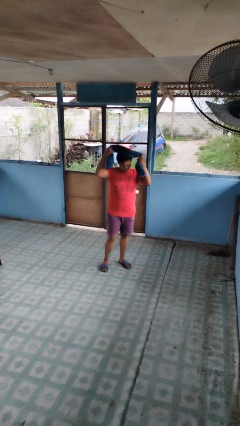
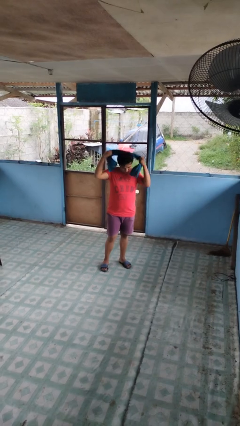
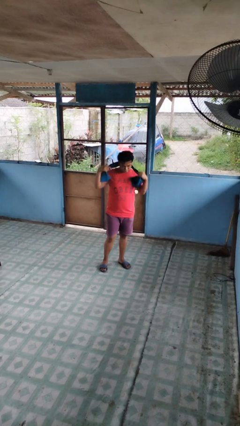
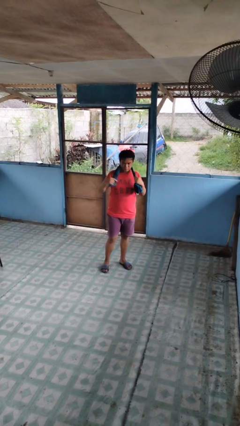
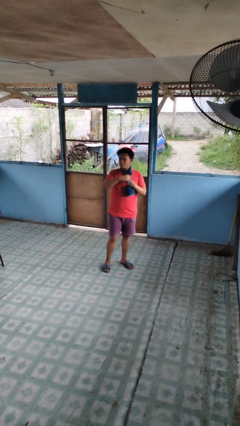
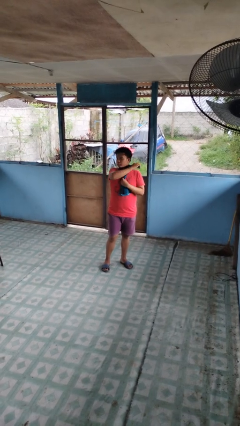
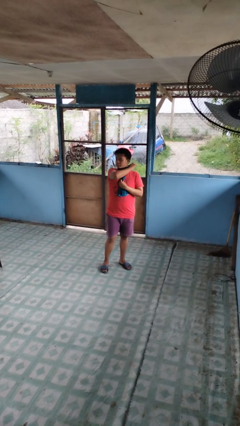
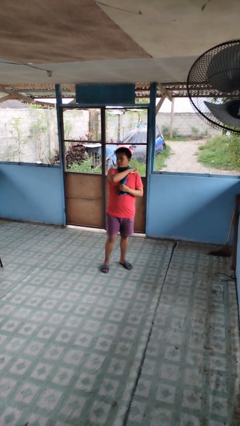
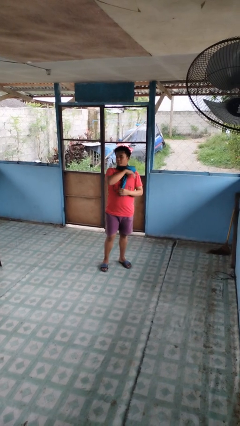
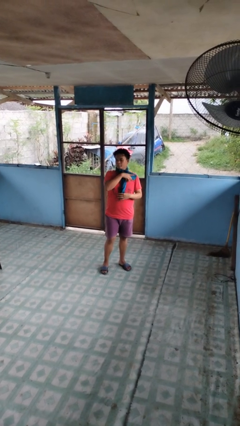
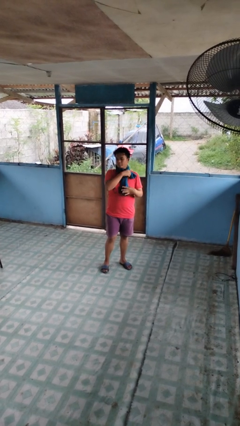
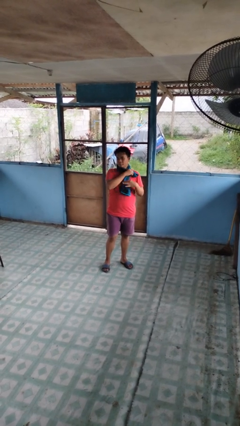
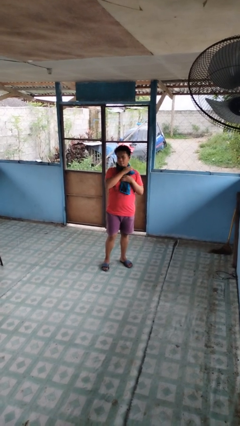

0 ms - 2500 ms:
person puts on scarf

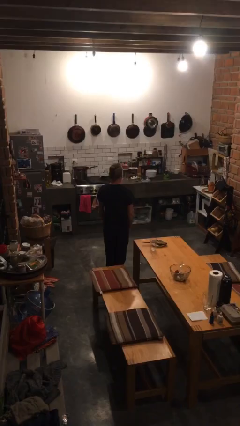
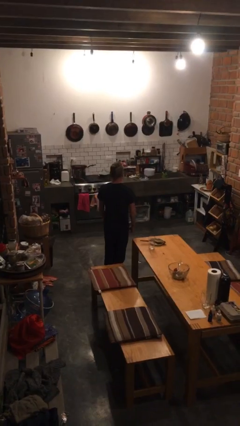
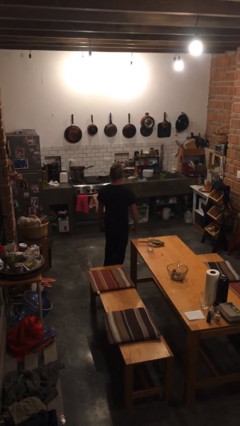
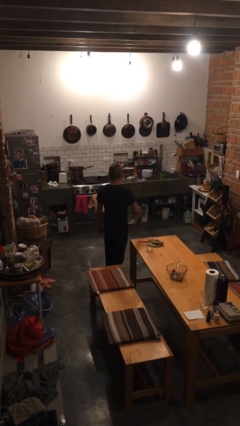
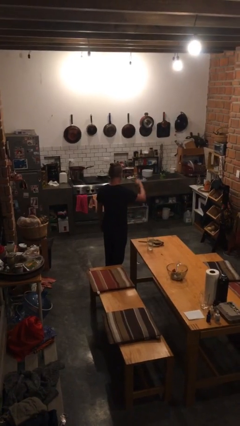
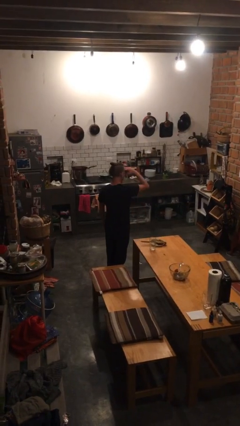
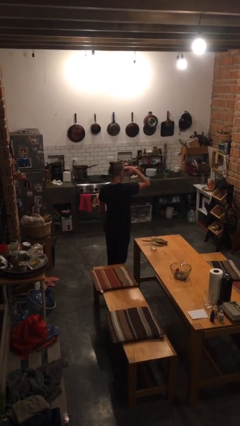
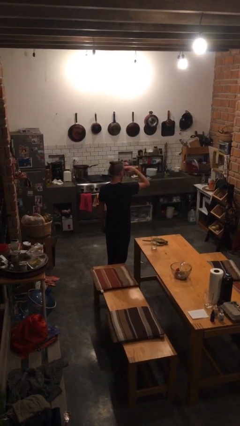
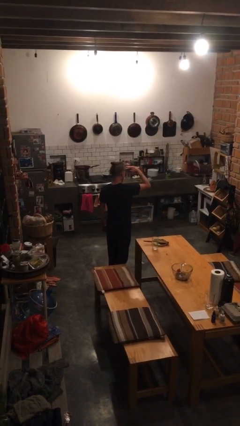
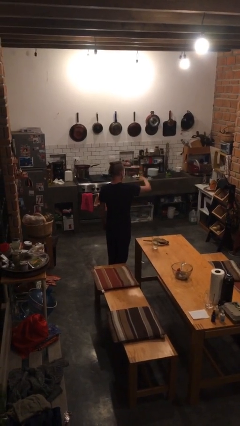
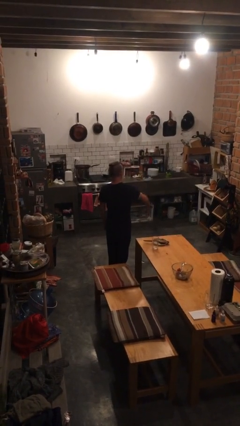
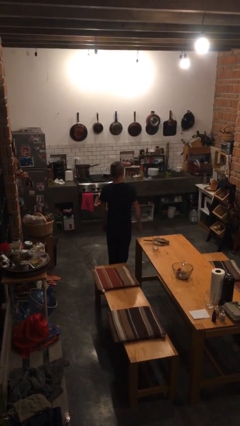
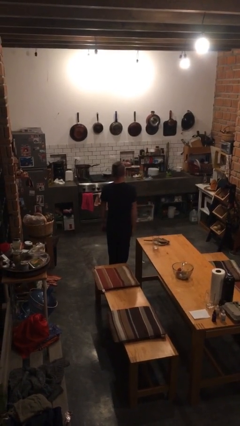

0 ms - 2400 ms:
person salutes

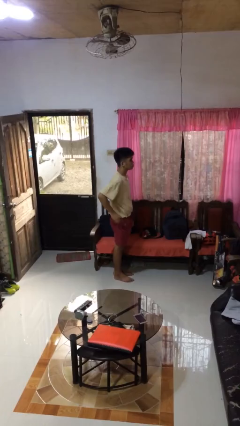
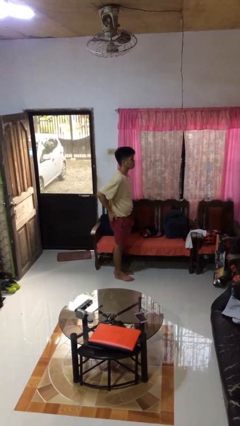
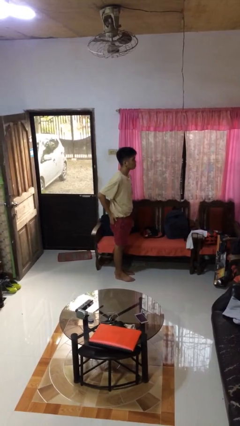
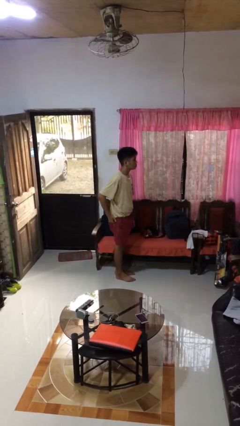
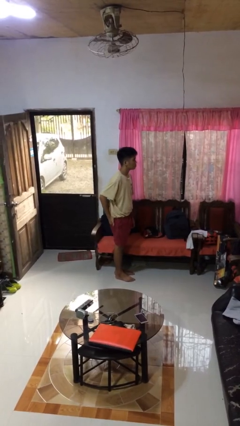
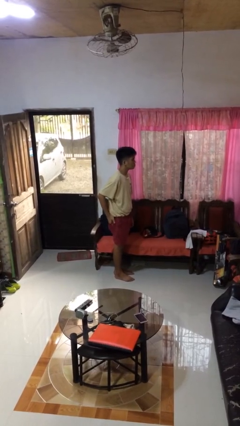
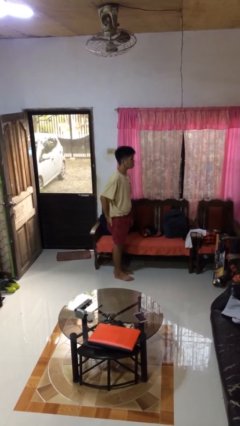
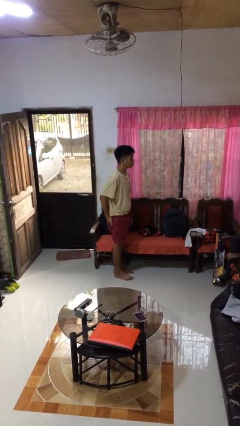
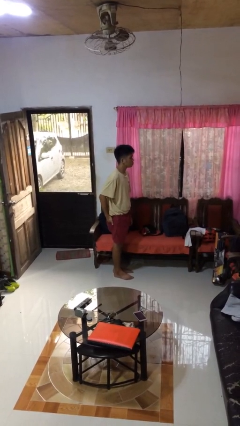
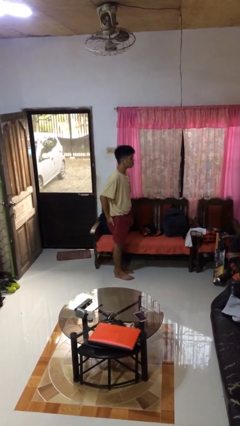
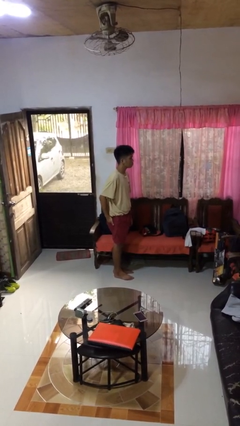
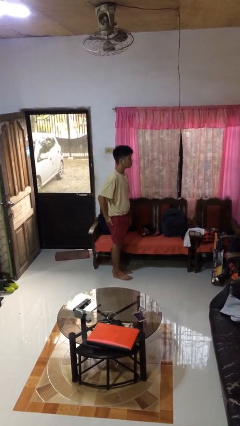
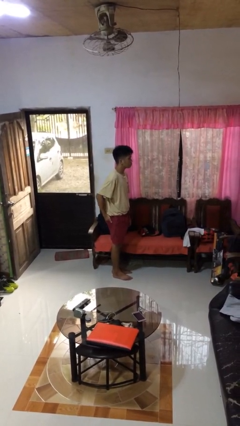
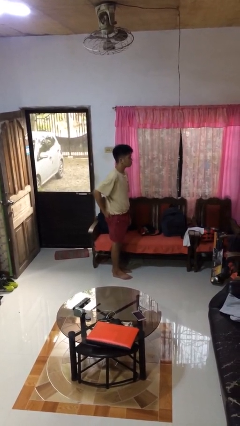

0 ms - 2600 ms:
person puts hands in back pockets

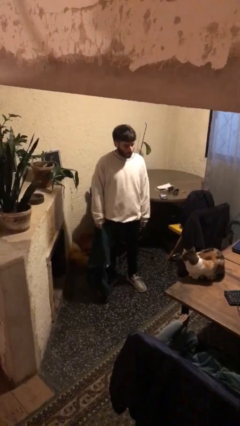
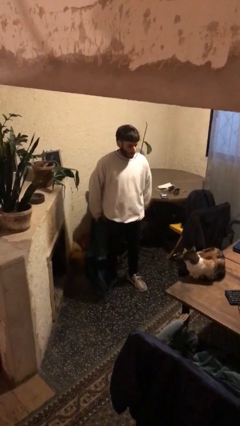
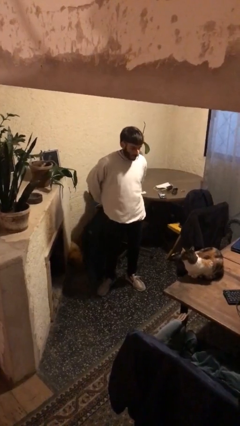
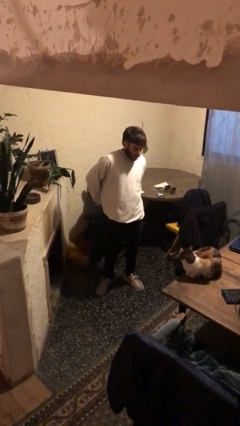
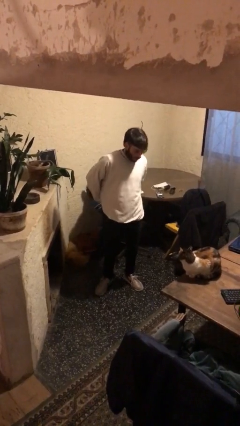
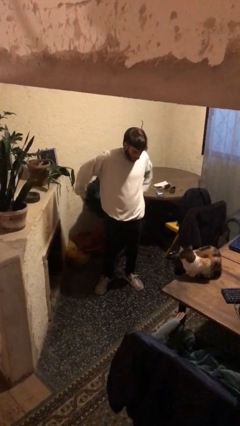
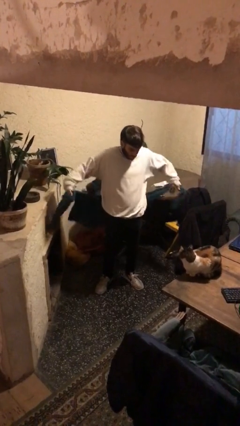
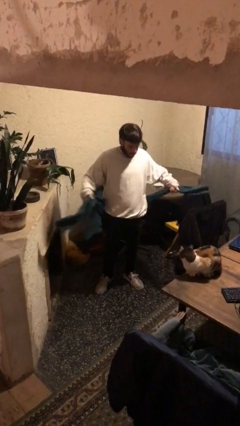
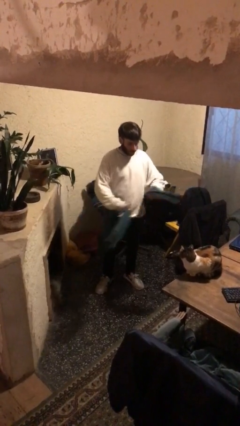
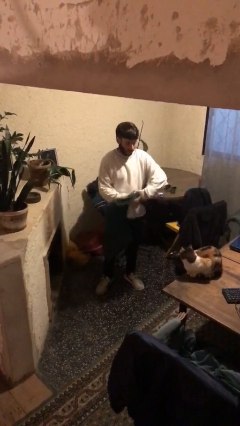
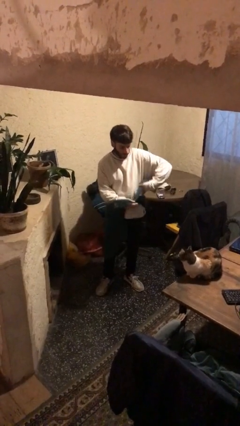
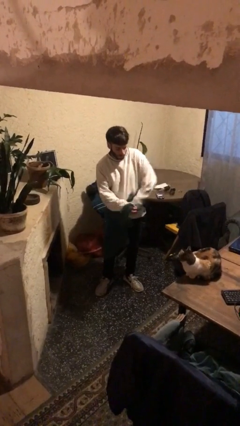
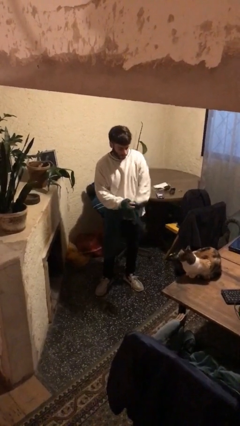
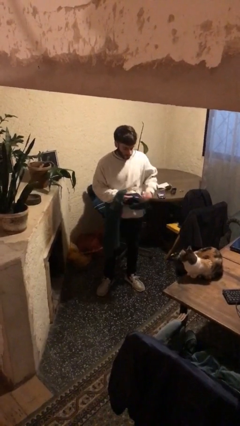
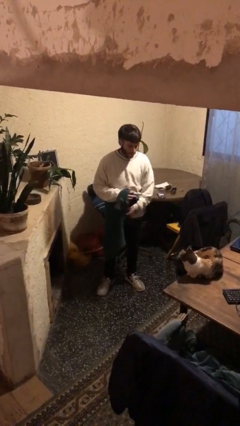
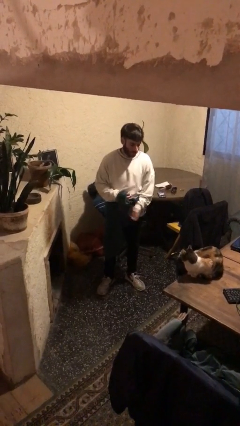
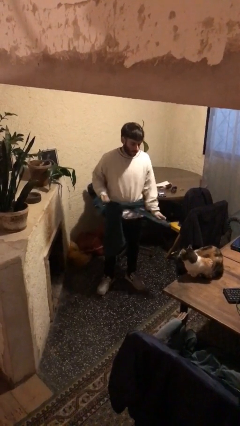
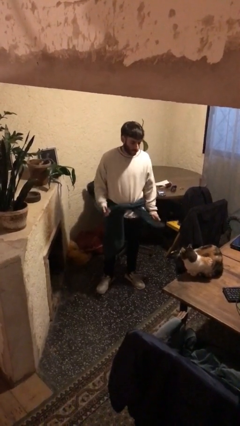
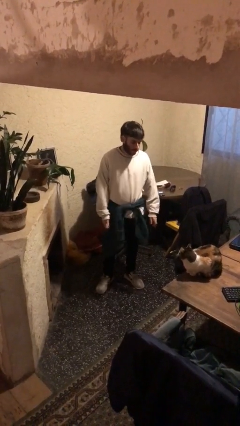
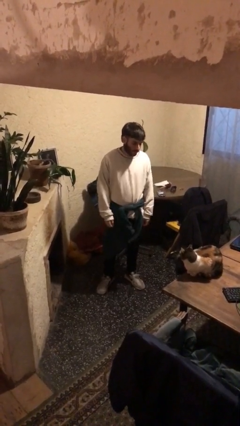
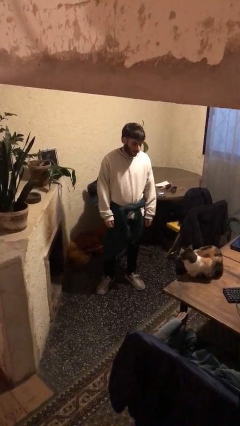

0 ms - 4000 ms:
person ties jacket around waist

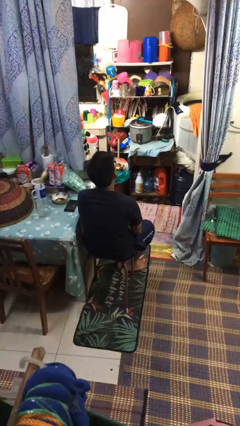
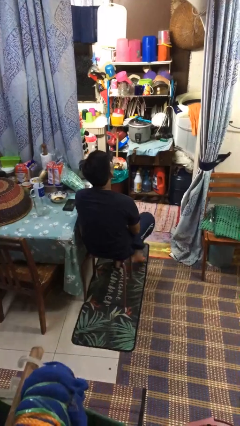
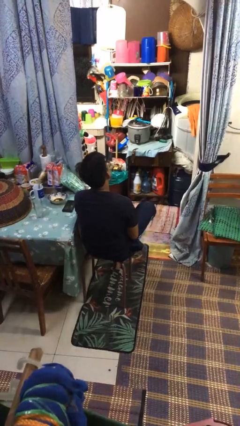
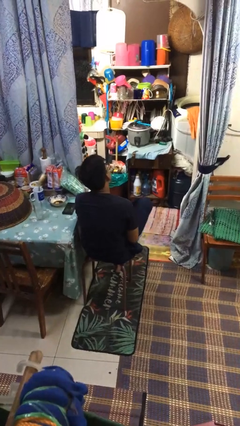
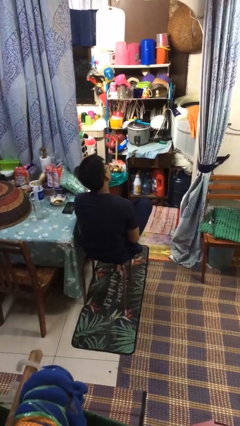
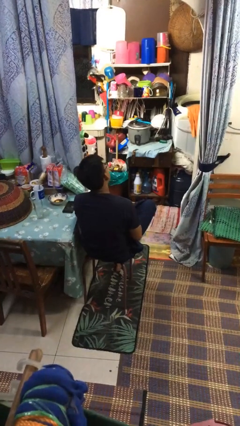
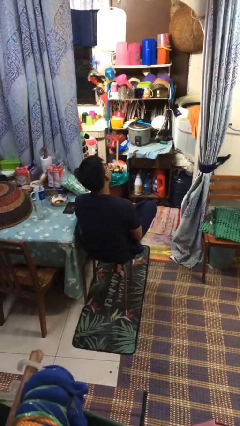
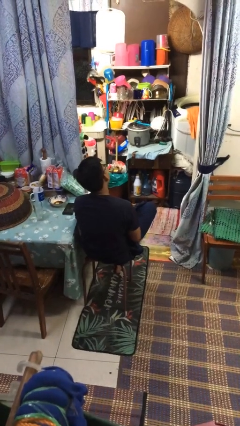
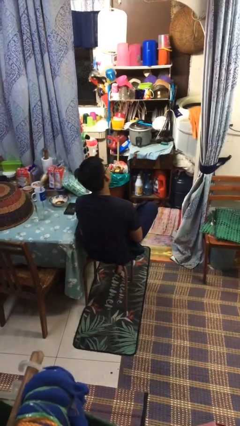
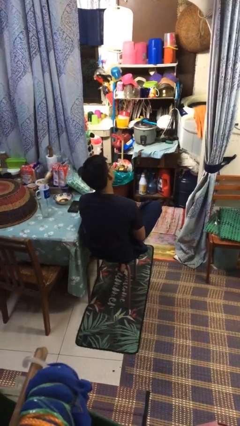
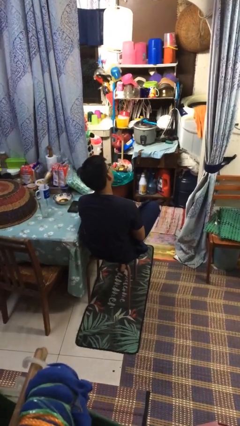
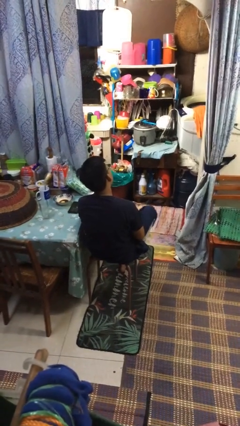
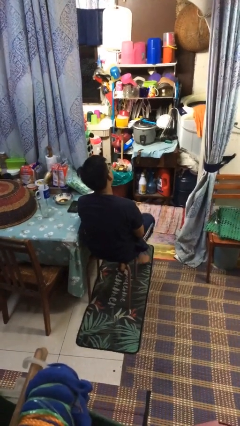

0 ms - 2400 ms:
person crosses legs

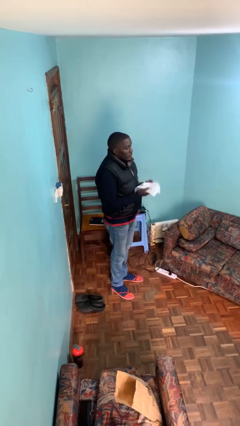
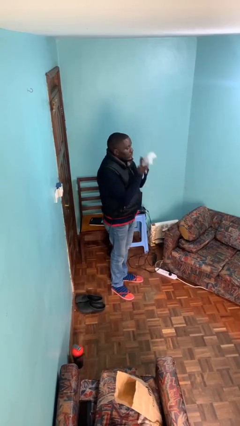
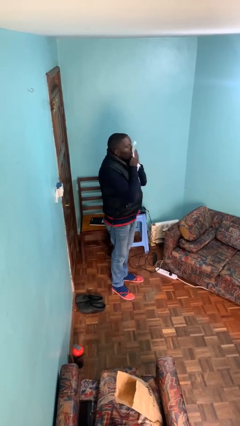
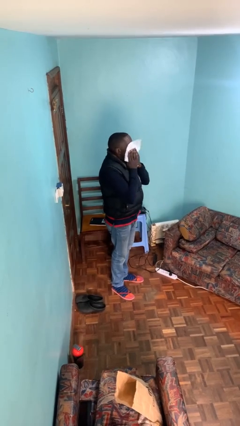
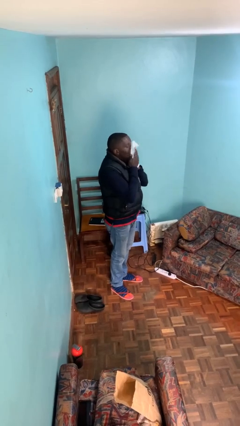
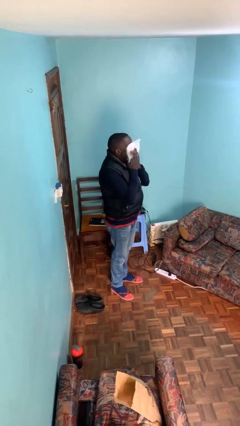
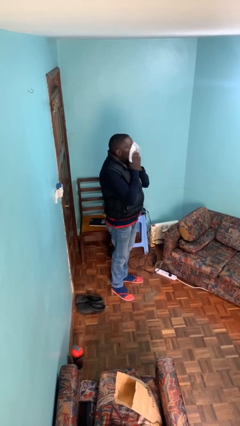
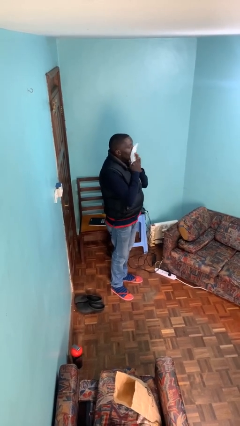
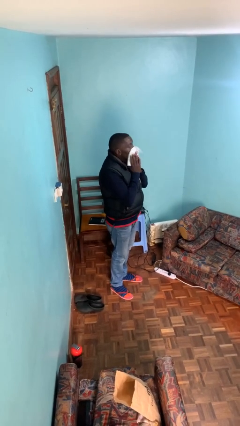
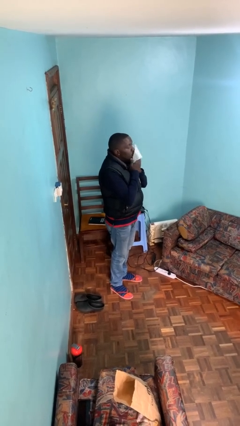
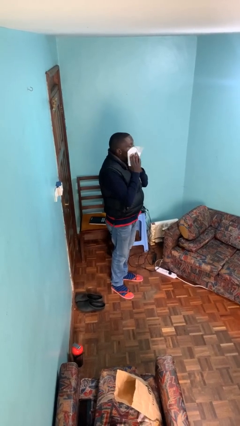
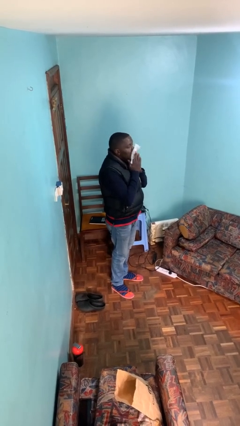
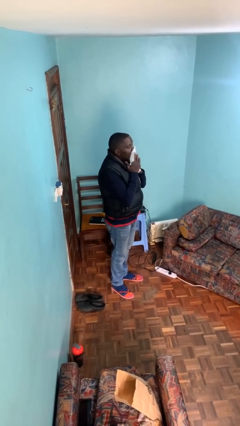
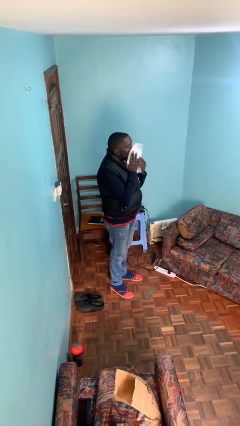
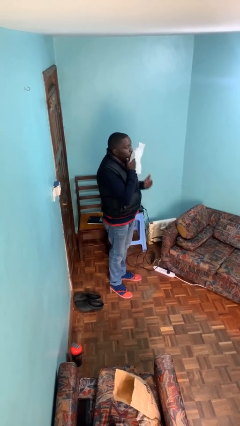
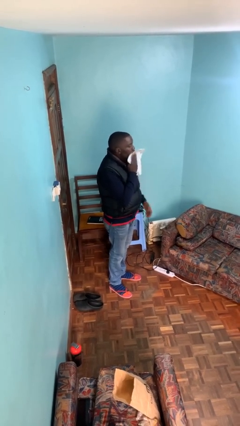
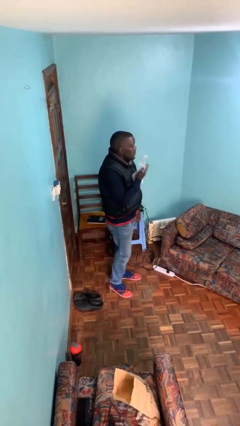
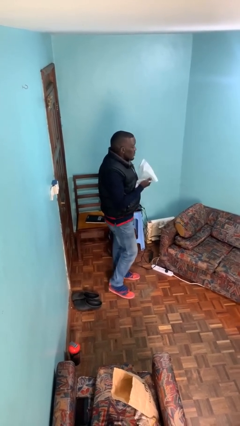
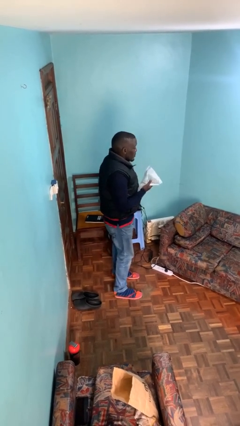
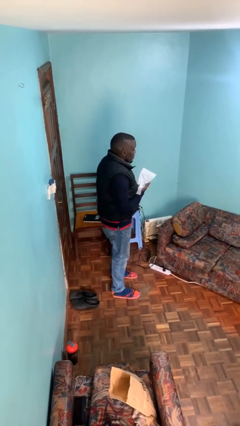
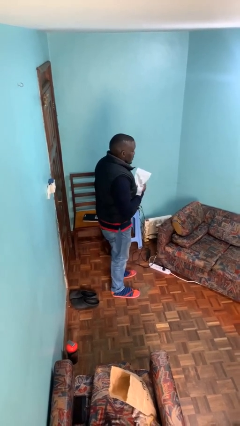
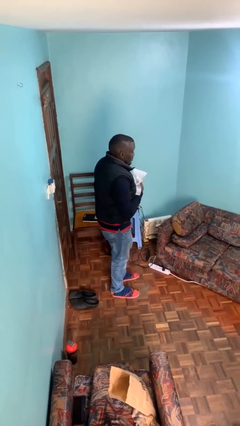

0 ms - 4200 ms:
person wipes mouth with napkin
